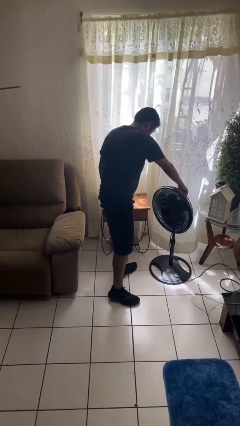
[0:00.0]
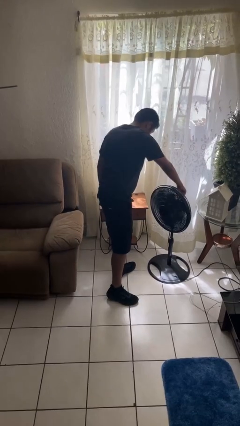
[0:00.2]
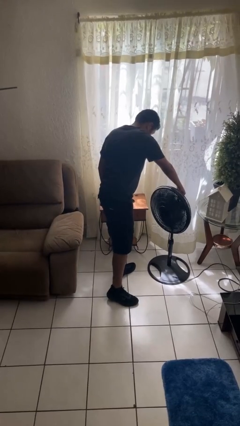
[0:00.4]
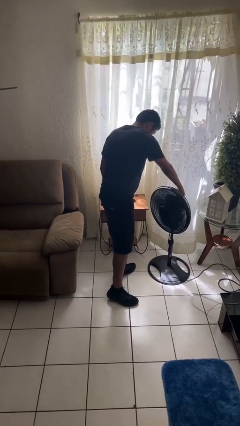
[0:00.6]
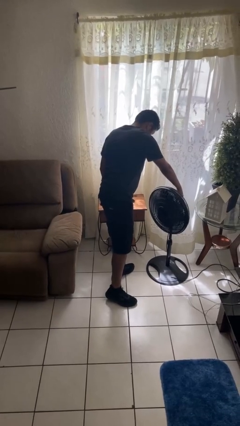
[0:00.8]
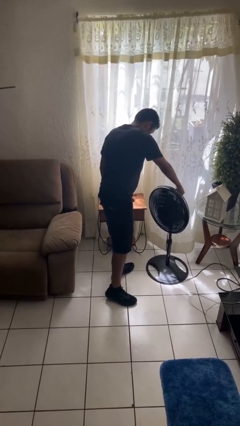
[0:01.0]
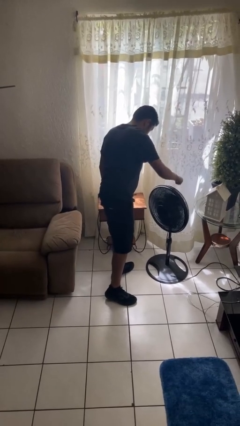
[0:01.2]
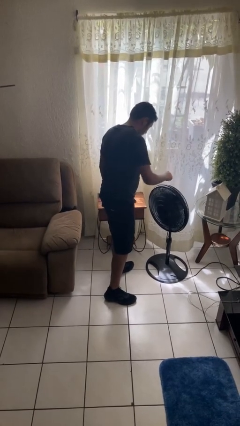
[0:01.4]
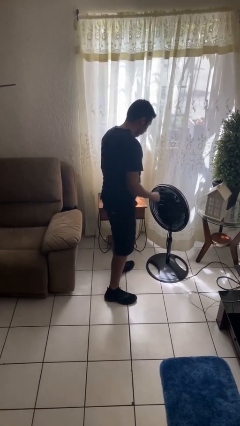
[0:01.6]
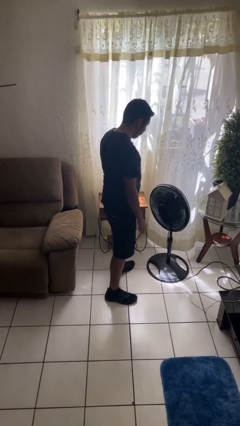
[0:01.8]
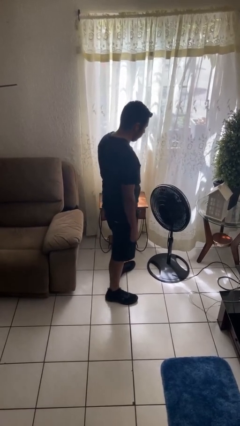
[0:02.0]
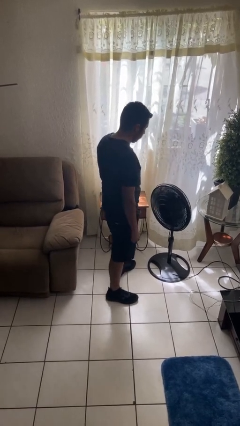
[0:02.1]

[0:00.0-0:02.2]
person turns on fan

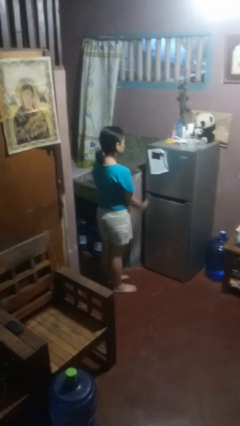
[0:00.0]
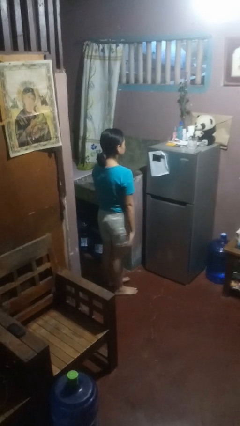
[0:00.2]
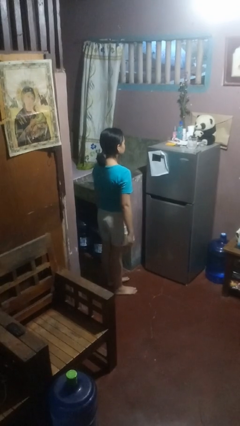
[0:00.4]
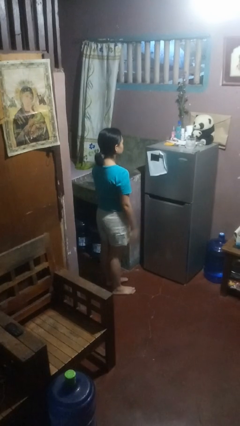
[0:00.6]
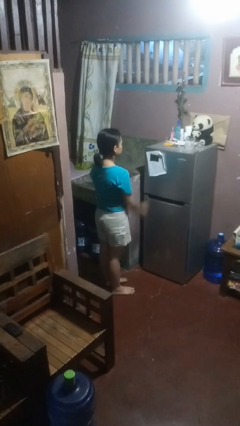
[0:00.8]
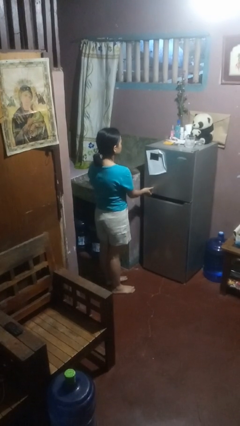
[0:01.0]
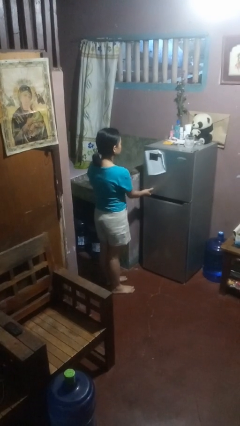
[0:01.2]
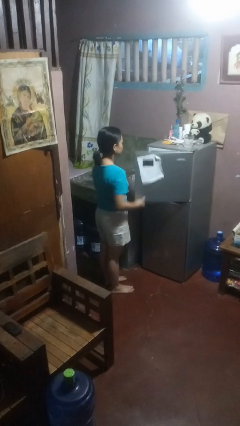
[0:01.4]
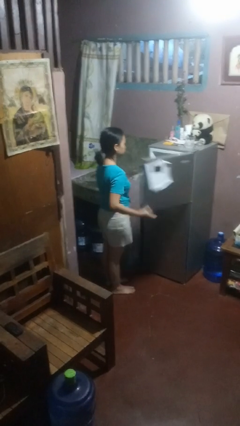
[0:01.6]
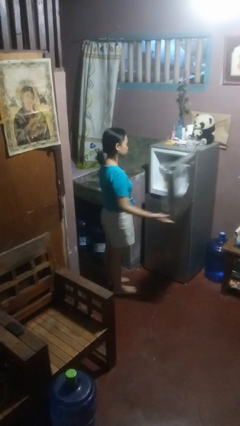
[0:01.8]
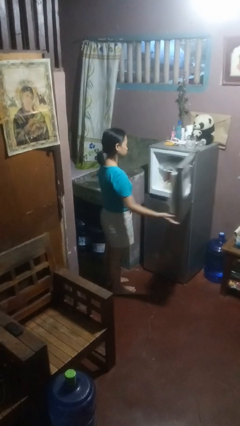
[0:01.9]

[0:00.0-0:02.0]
person opens refrigerator

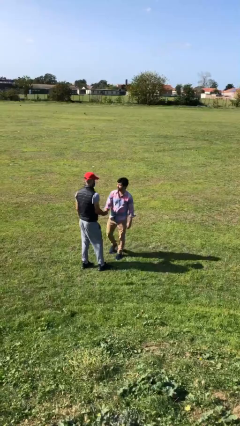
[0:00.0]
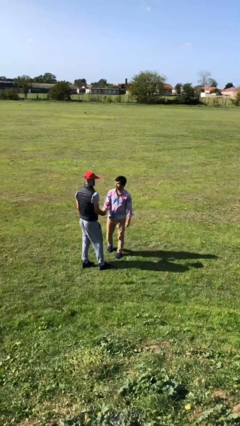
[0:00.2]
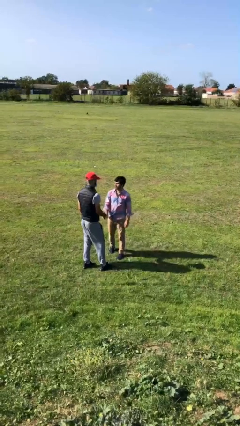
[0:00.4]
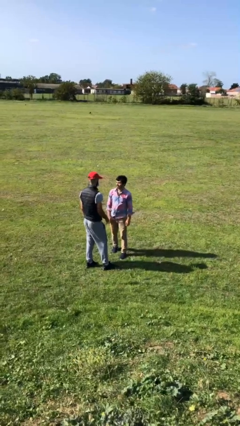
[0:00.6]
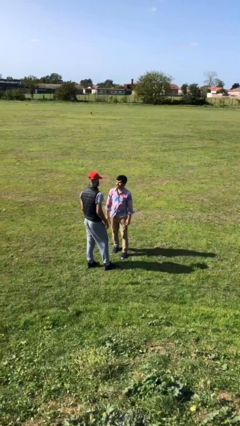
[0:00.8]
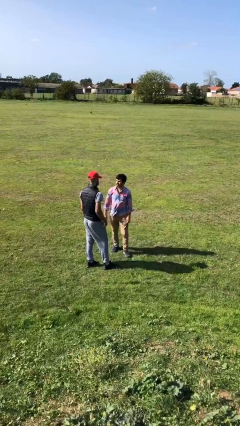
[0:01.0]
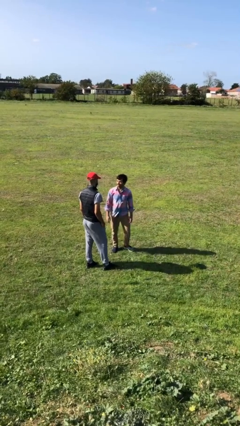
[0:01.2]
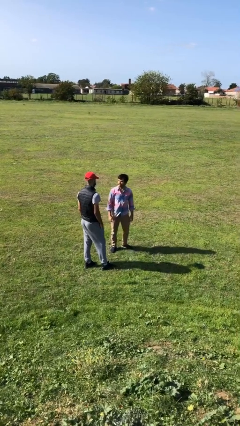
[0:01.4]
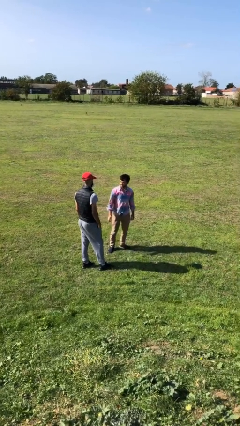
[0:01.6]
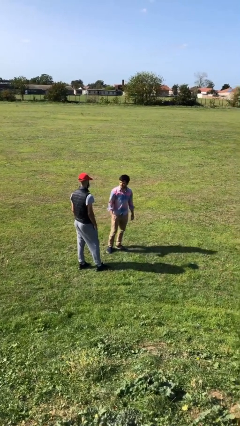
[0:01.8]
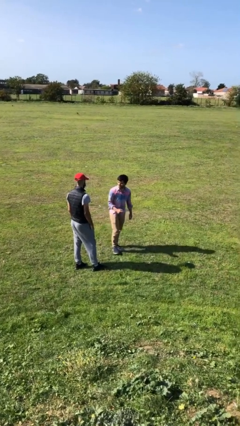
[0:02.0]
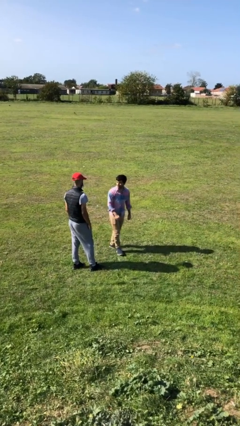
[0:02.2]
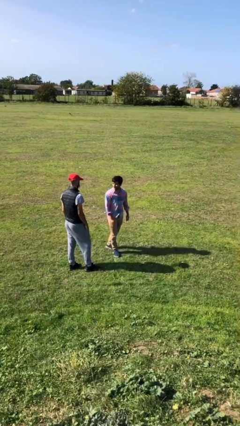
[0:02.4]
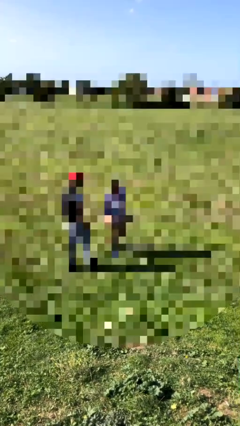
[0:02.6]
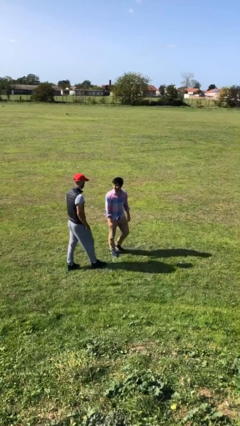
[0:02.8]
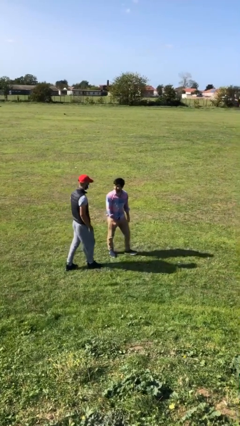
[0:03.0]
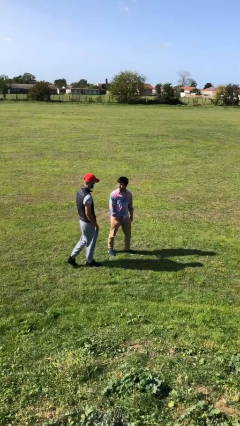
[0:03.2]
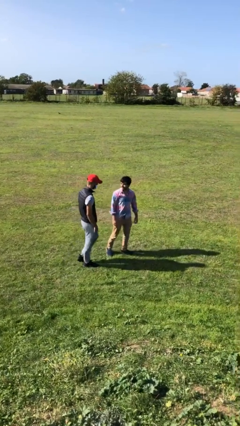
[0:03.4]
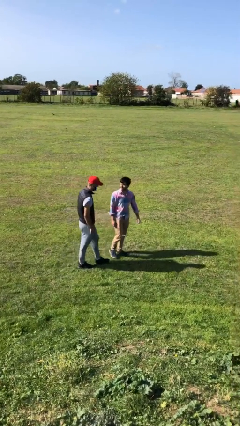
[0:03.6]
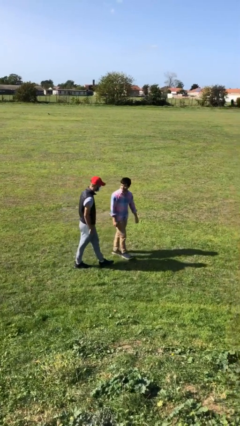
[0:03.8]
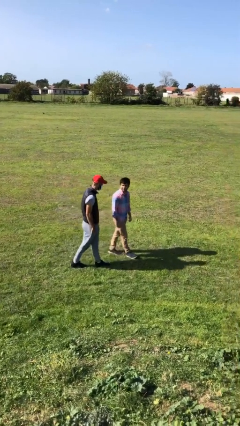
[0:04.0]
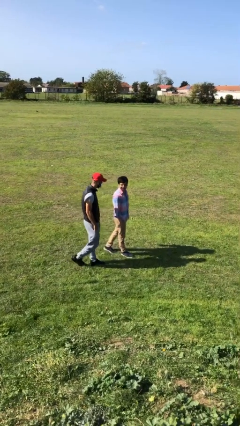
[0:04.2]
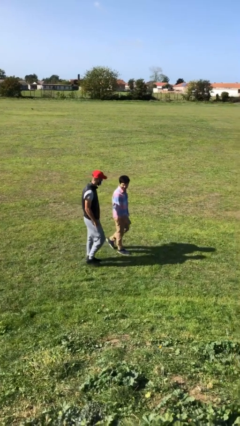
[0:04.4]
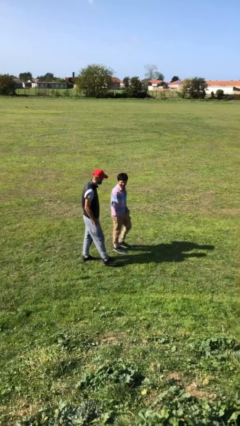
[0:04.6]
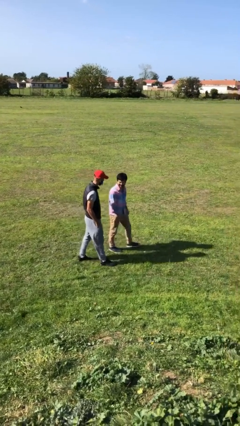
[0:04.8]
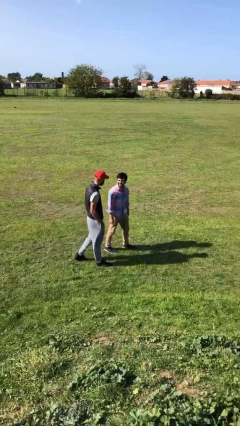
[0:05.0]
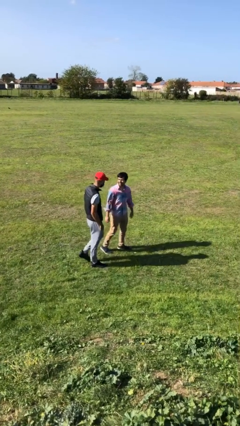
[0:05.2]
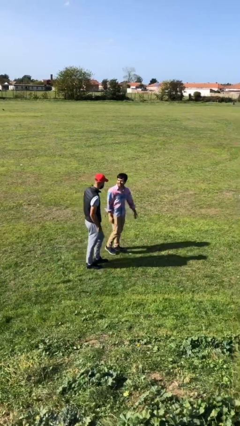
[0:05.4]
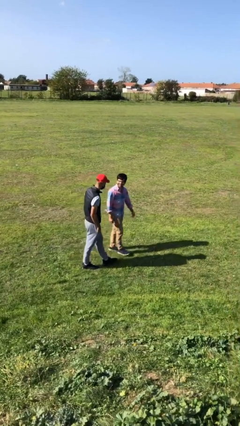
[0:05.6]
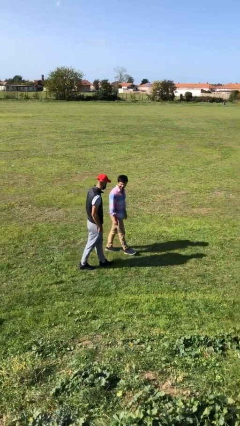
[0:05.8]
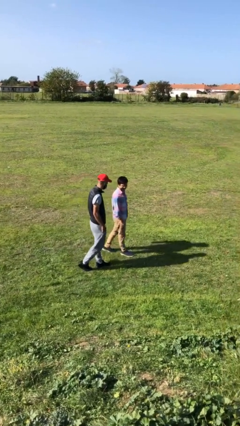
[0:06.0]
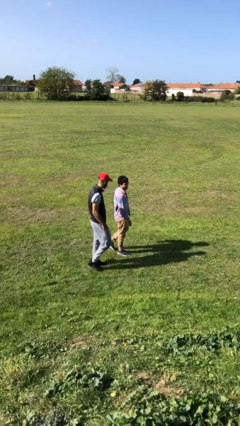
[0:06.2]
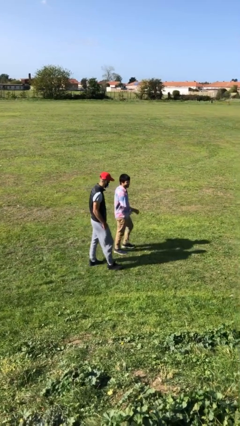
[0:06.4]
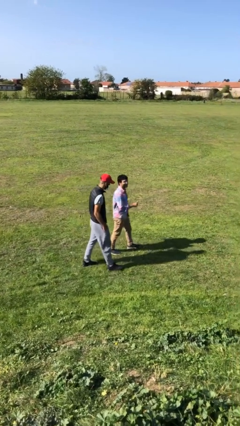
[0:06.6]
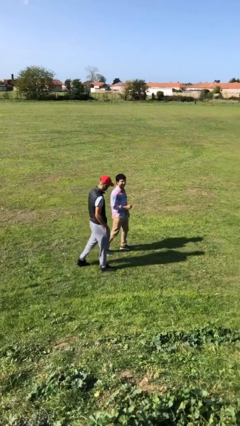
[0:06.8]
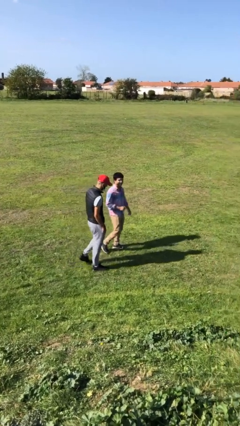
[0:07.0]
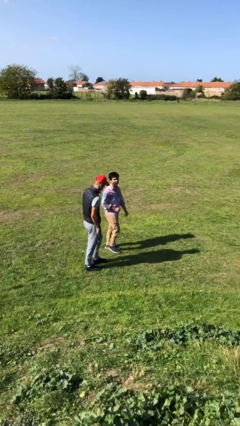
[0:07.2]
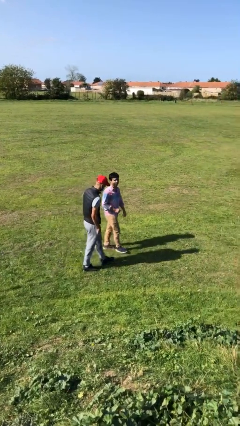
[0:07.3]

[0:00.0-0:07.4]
person talks to person

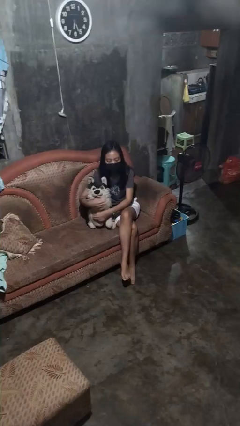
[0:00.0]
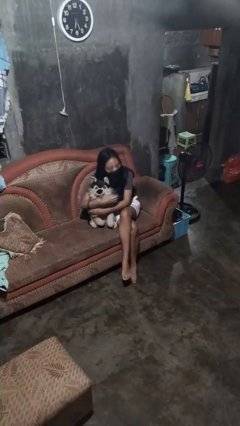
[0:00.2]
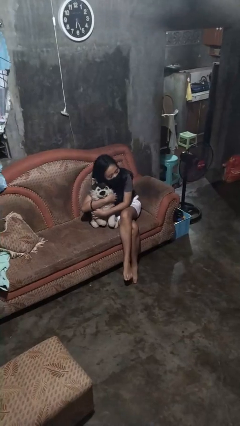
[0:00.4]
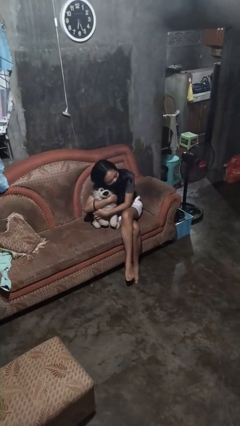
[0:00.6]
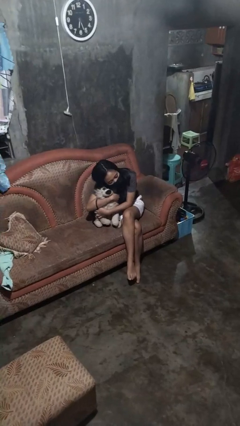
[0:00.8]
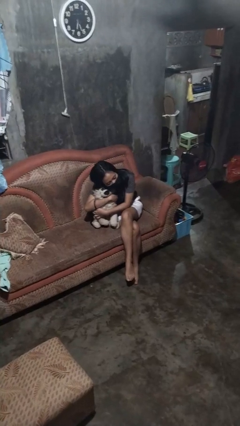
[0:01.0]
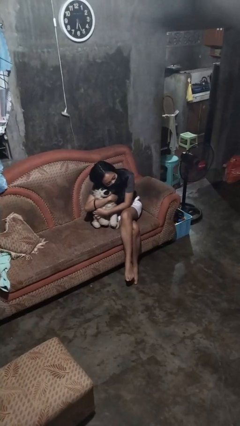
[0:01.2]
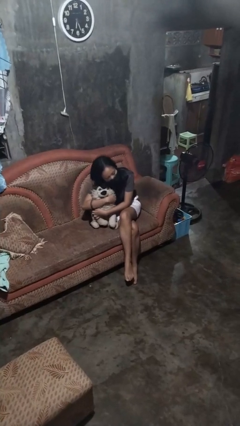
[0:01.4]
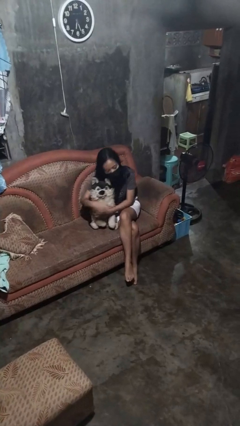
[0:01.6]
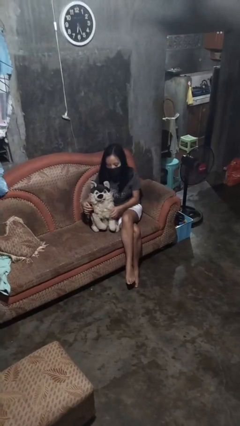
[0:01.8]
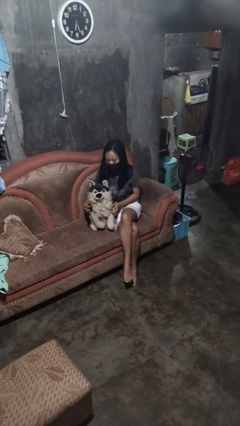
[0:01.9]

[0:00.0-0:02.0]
person hugs stuffed animal

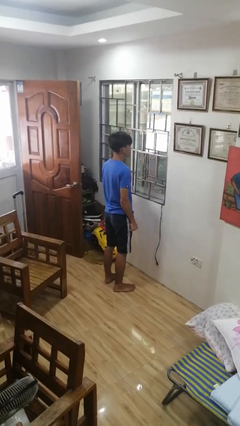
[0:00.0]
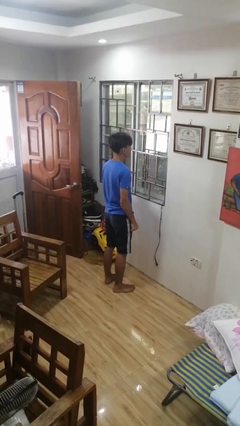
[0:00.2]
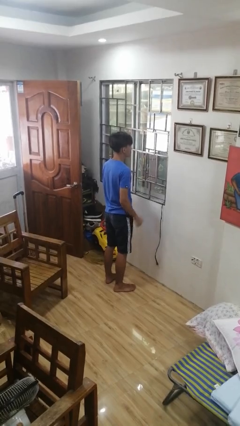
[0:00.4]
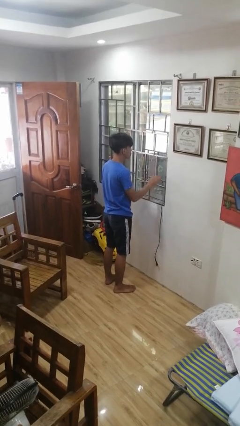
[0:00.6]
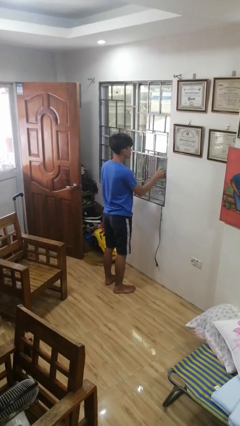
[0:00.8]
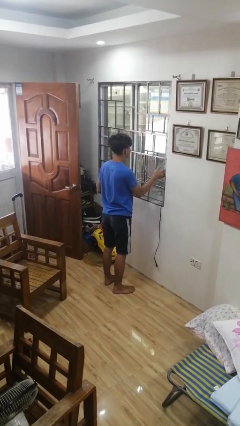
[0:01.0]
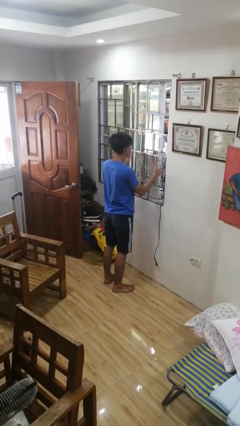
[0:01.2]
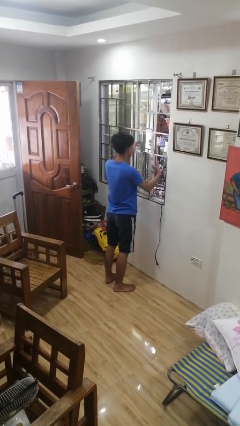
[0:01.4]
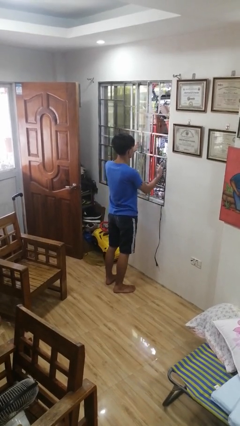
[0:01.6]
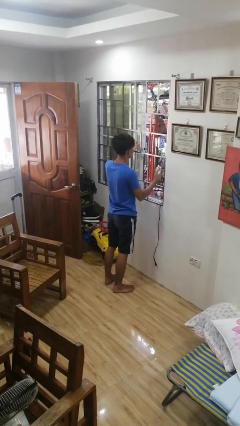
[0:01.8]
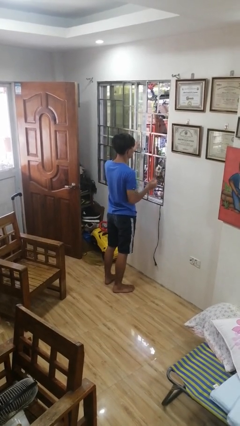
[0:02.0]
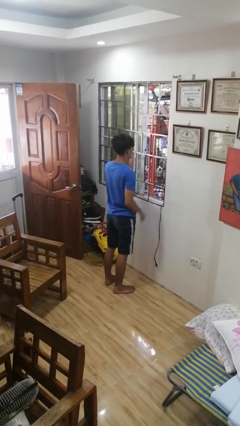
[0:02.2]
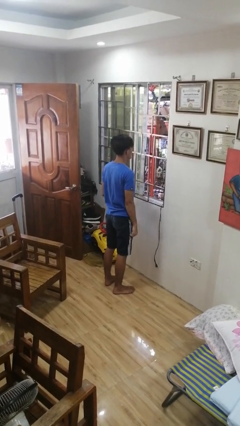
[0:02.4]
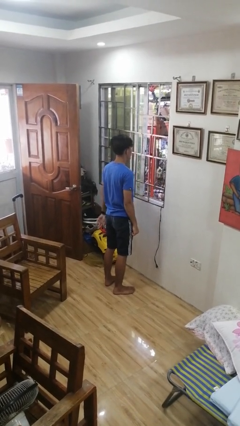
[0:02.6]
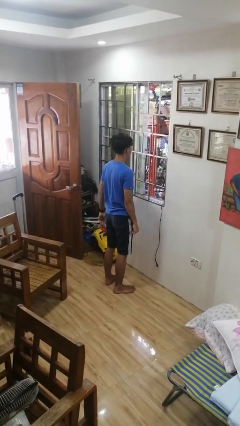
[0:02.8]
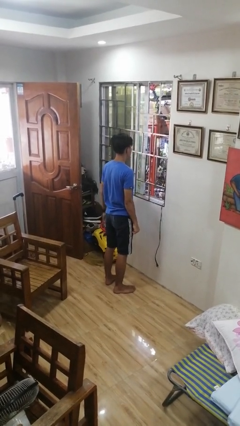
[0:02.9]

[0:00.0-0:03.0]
person opens home window

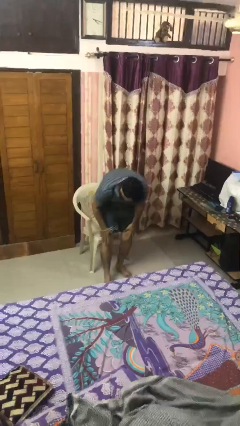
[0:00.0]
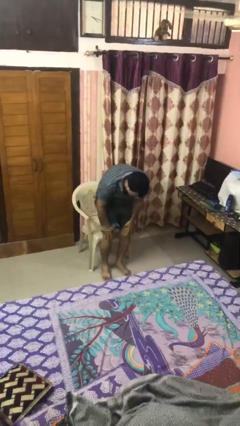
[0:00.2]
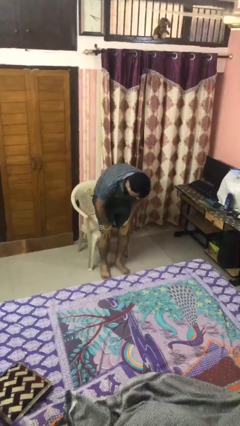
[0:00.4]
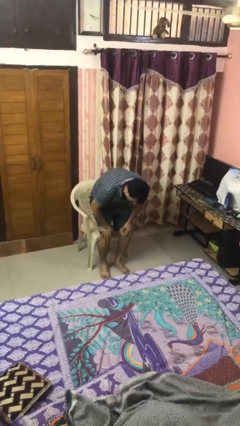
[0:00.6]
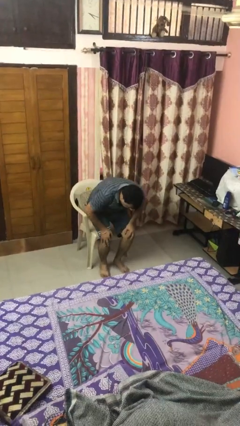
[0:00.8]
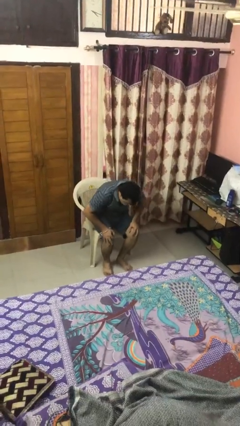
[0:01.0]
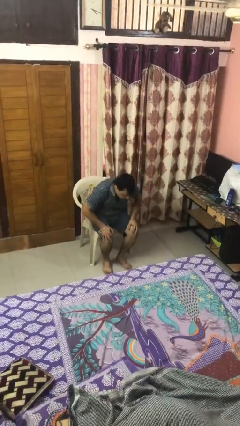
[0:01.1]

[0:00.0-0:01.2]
person sits down
